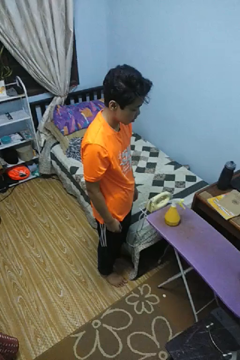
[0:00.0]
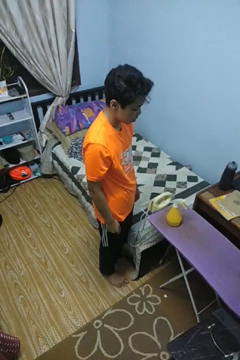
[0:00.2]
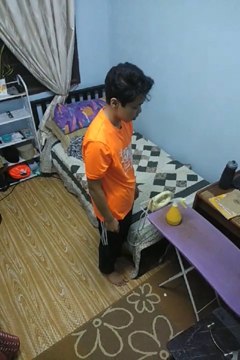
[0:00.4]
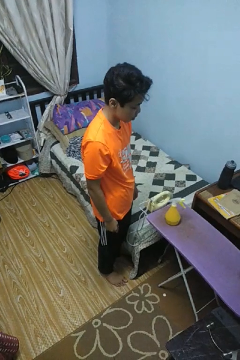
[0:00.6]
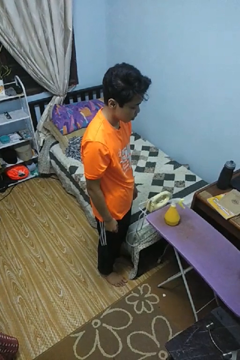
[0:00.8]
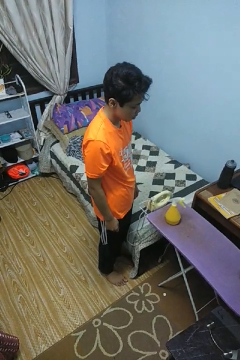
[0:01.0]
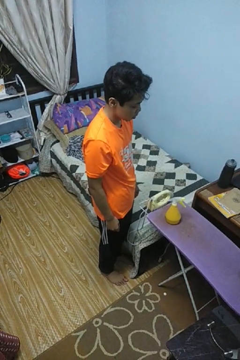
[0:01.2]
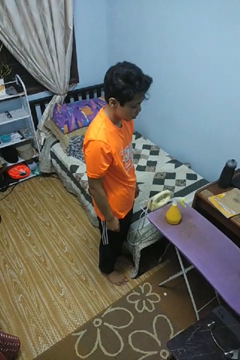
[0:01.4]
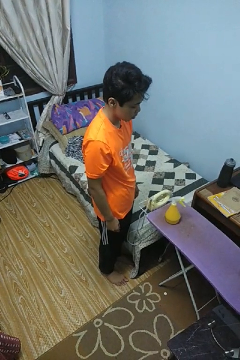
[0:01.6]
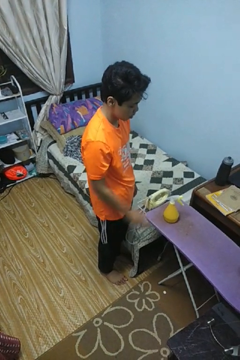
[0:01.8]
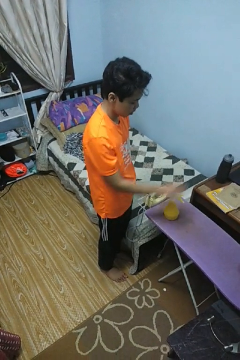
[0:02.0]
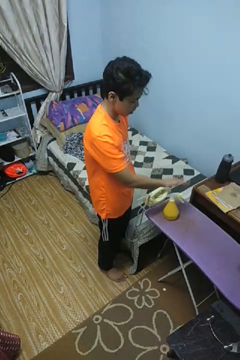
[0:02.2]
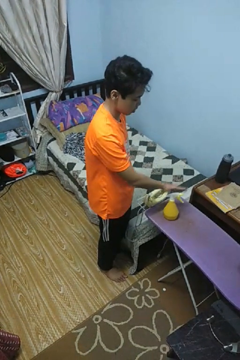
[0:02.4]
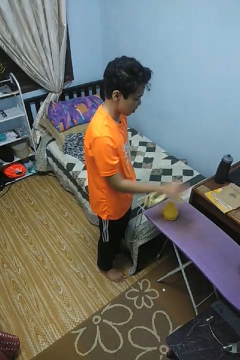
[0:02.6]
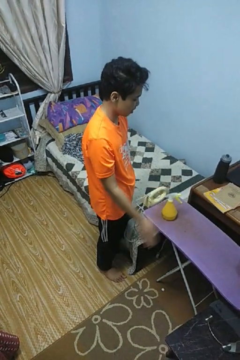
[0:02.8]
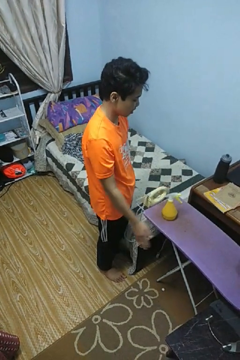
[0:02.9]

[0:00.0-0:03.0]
person waves hand over object

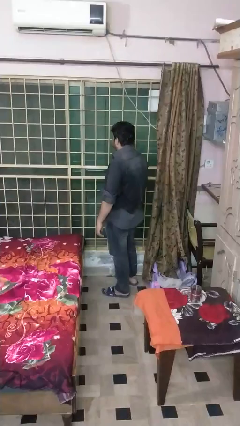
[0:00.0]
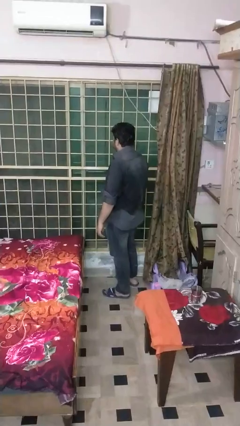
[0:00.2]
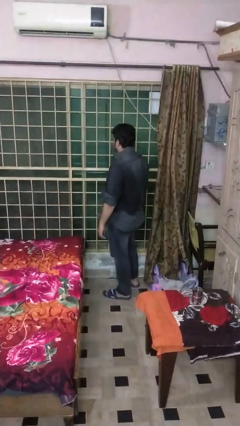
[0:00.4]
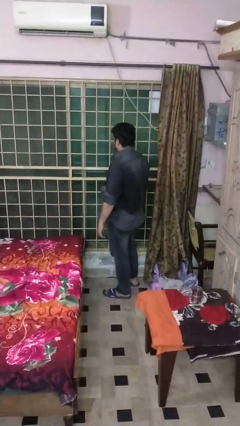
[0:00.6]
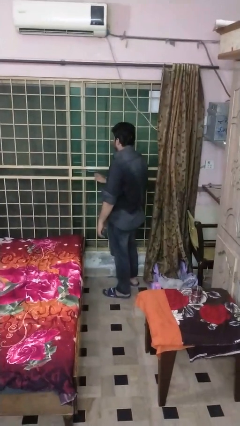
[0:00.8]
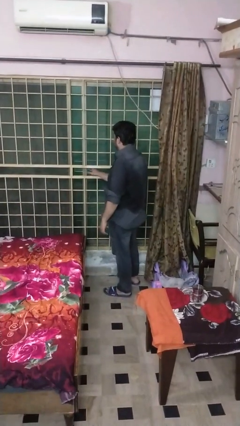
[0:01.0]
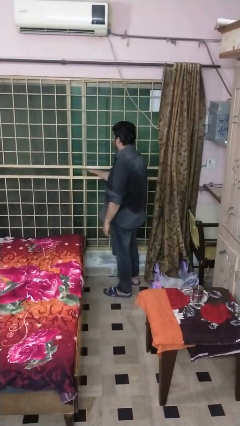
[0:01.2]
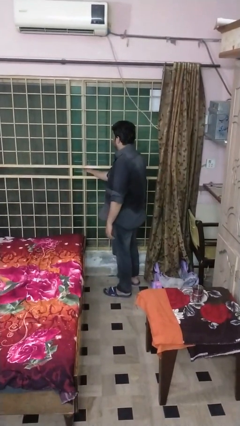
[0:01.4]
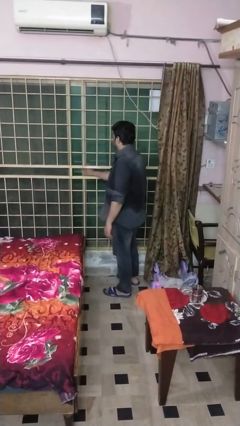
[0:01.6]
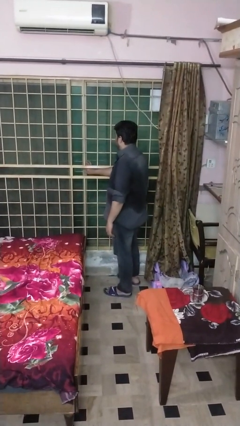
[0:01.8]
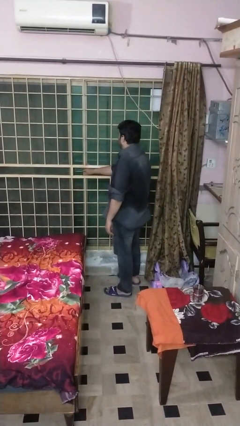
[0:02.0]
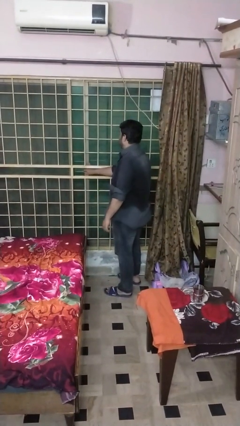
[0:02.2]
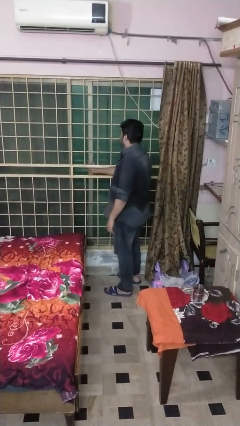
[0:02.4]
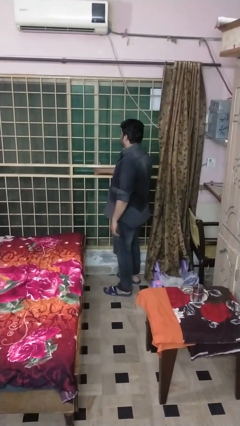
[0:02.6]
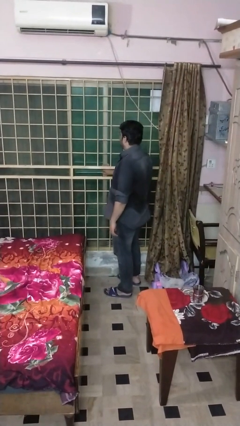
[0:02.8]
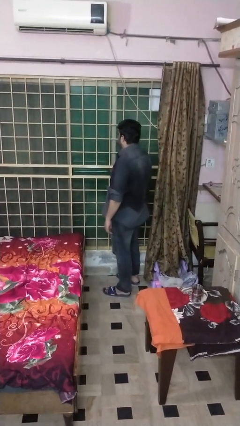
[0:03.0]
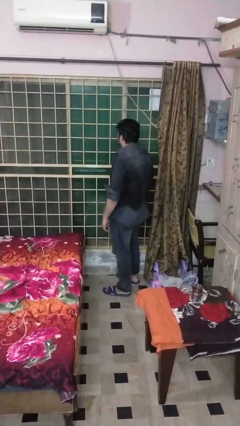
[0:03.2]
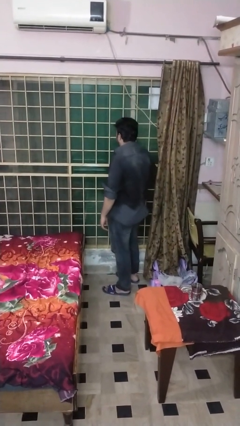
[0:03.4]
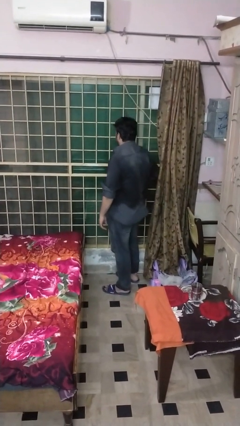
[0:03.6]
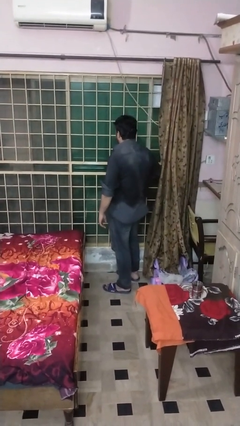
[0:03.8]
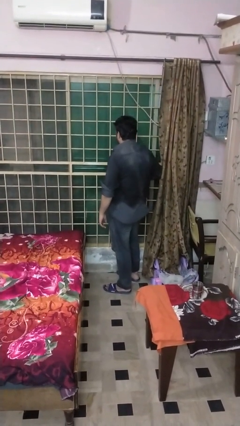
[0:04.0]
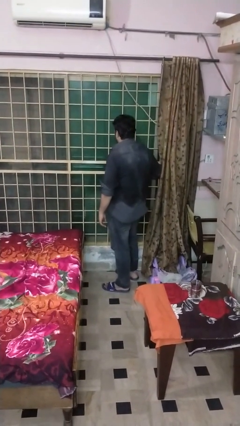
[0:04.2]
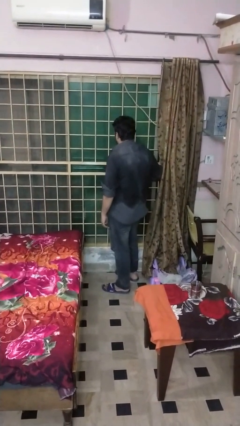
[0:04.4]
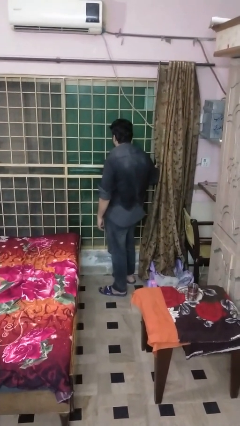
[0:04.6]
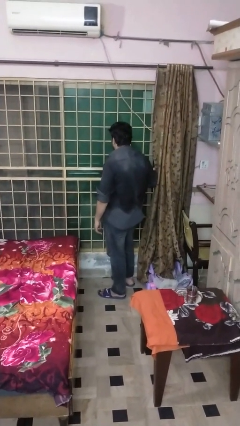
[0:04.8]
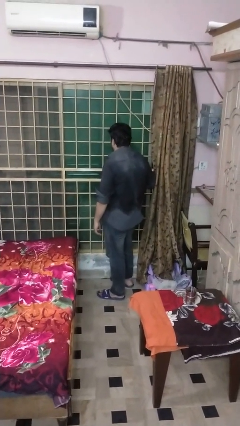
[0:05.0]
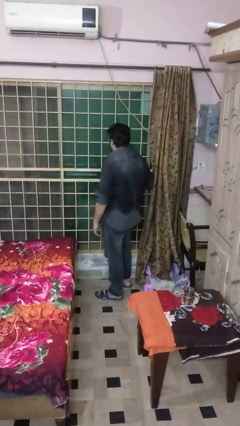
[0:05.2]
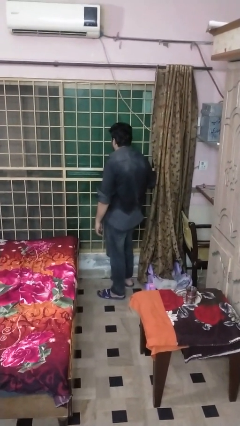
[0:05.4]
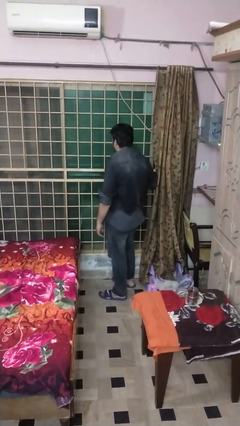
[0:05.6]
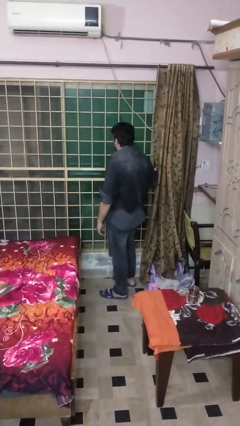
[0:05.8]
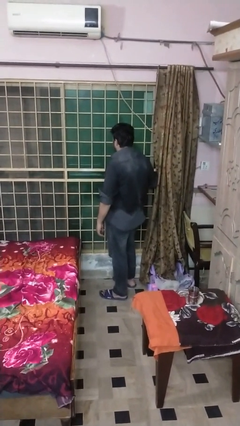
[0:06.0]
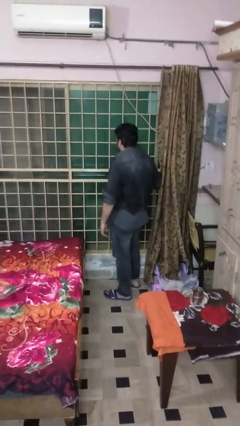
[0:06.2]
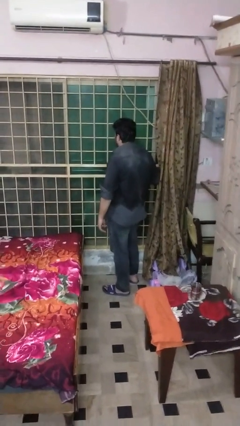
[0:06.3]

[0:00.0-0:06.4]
person opens sliding door

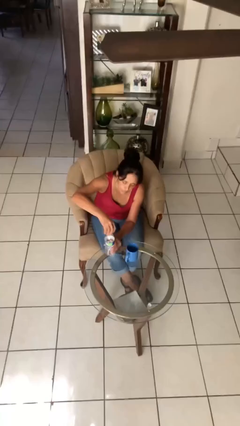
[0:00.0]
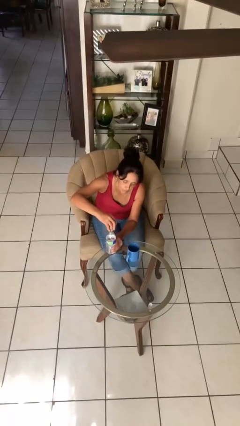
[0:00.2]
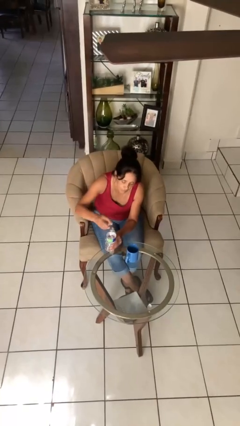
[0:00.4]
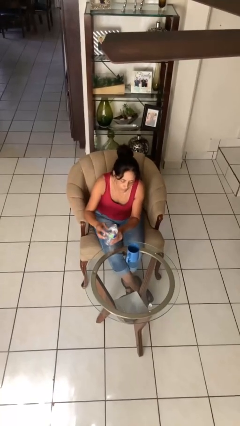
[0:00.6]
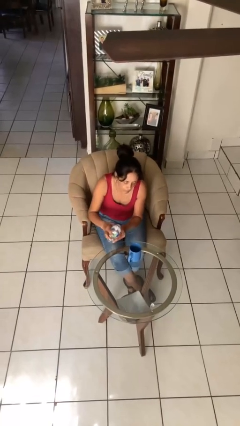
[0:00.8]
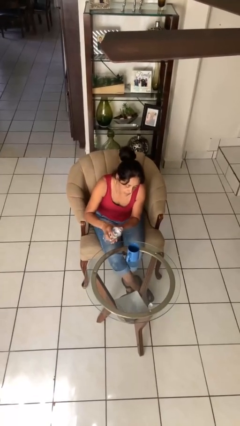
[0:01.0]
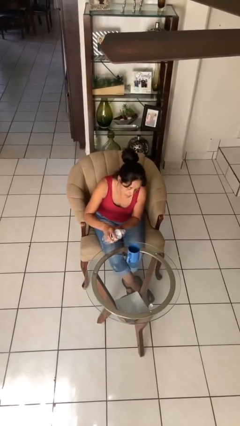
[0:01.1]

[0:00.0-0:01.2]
person unscrews lid from bottle

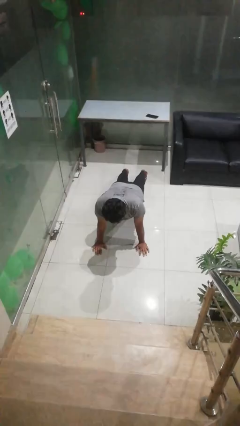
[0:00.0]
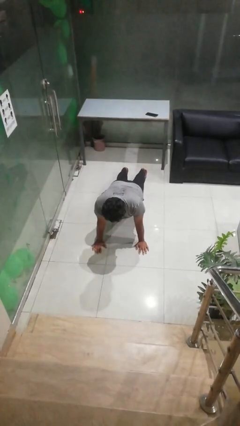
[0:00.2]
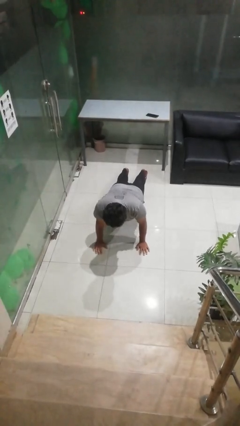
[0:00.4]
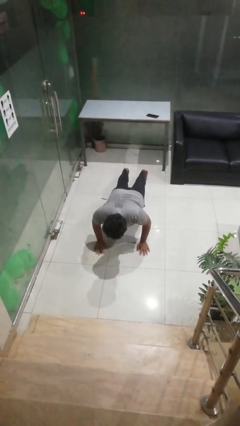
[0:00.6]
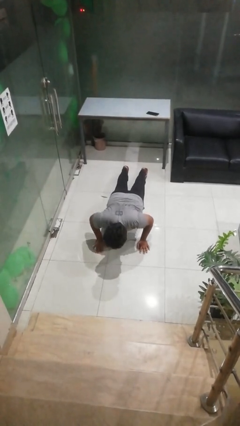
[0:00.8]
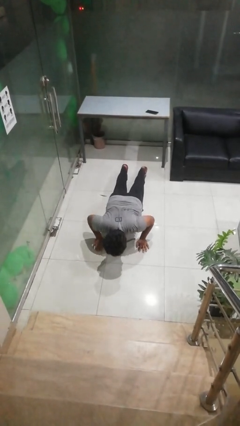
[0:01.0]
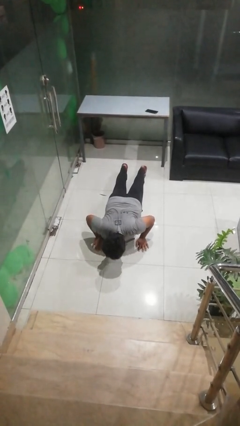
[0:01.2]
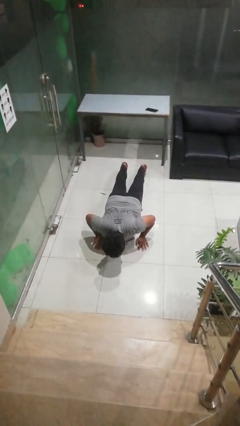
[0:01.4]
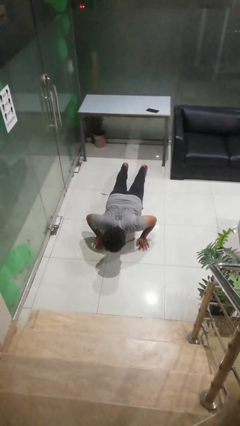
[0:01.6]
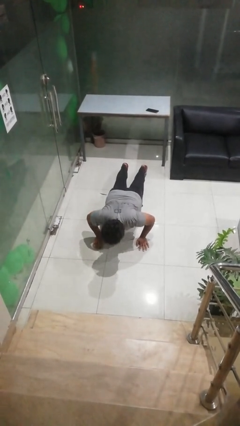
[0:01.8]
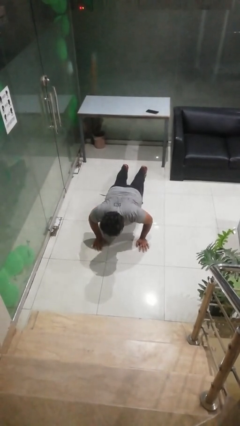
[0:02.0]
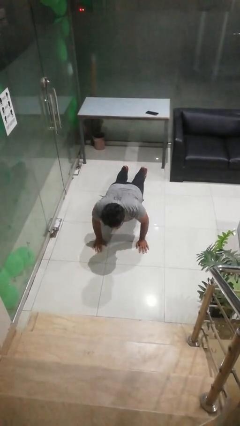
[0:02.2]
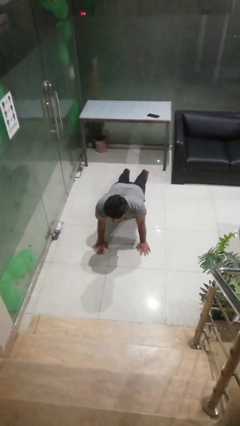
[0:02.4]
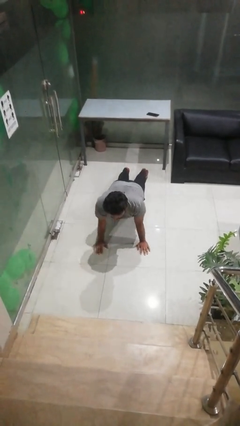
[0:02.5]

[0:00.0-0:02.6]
person exercises with pushup

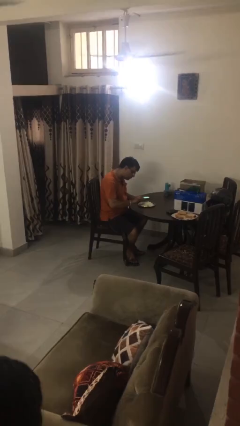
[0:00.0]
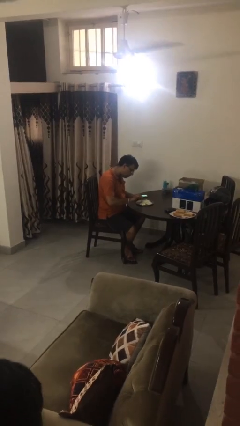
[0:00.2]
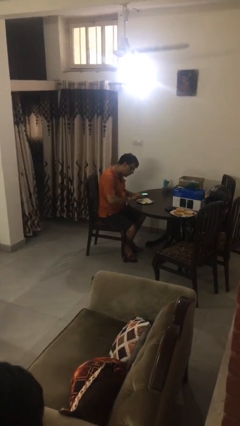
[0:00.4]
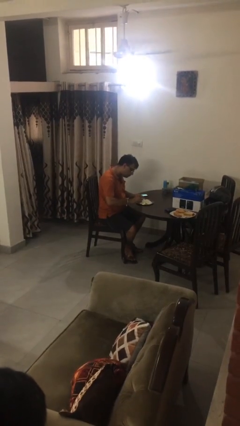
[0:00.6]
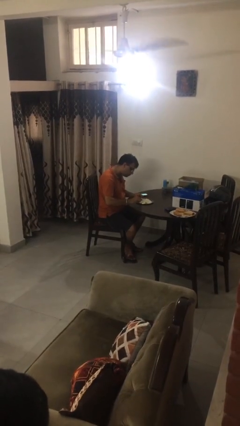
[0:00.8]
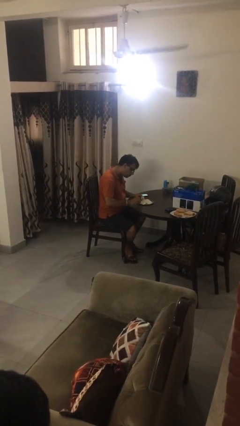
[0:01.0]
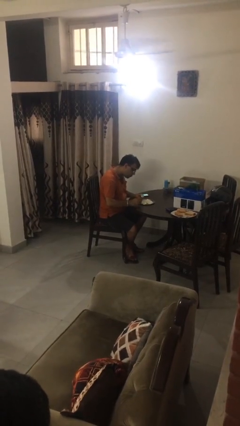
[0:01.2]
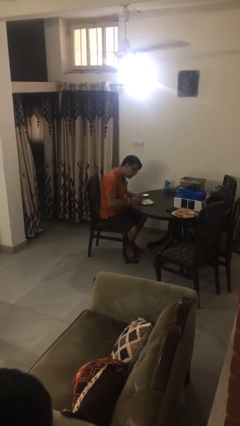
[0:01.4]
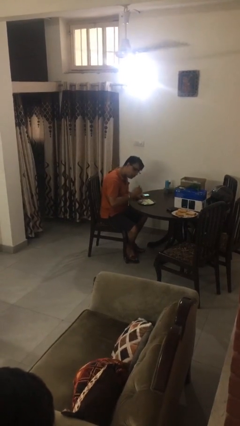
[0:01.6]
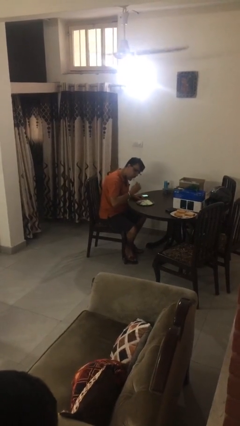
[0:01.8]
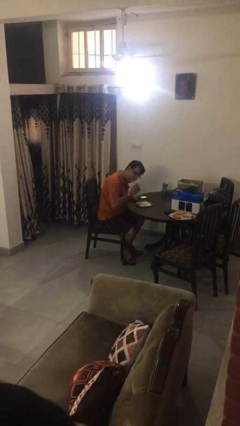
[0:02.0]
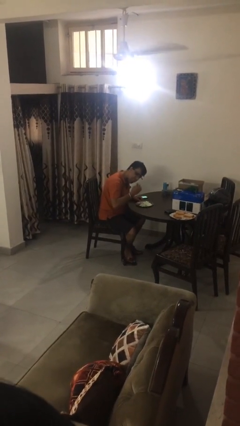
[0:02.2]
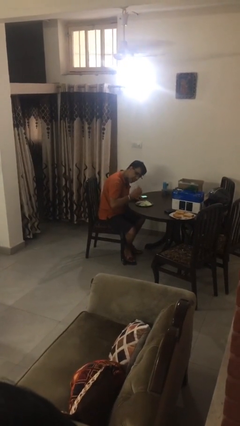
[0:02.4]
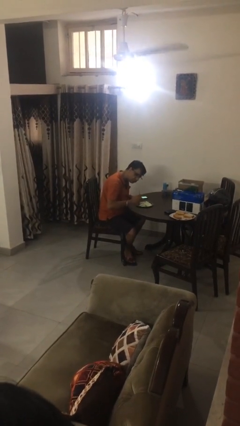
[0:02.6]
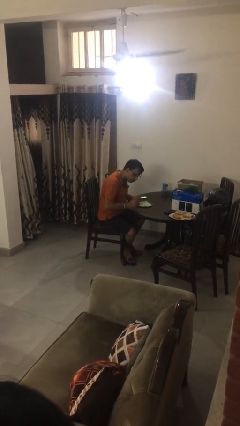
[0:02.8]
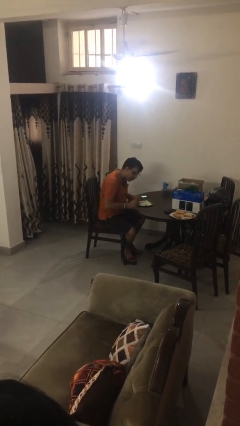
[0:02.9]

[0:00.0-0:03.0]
person eats with utensil

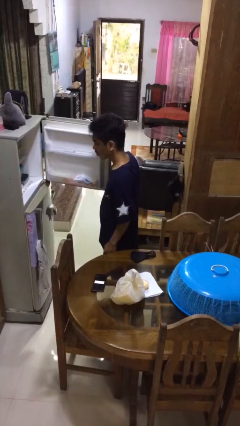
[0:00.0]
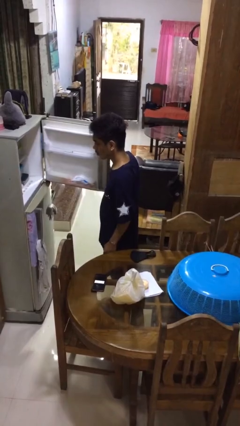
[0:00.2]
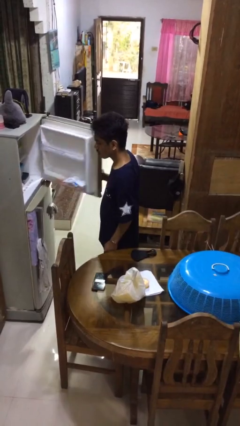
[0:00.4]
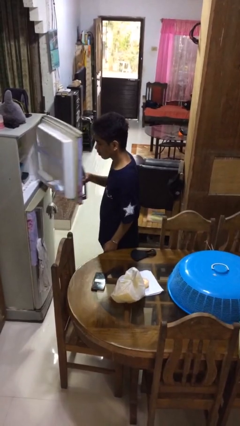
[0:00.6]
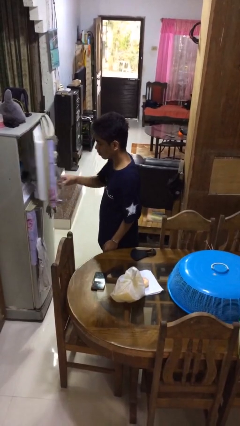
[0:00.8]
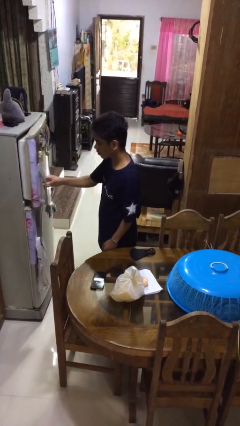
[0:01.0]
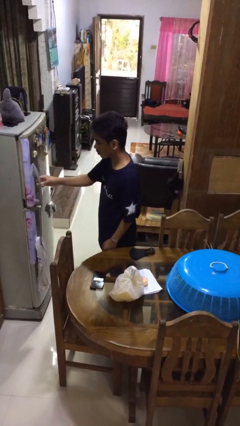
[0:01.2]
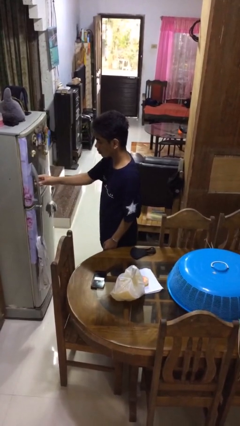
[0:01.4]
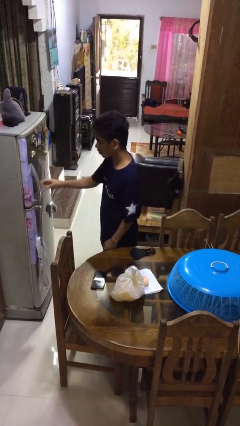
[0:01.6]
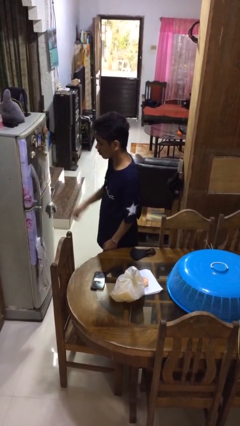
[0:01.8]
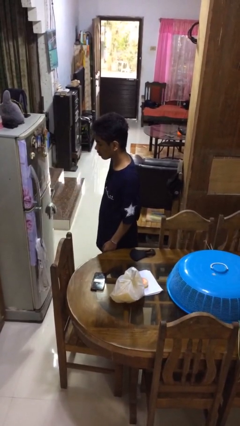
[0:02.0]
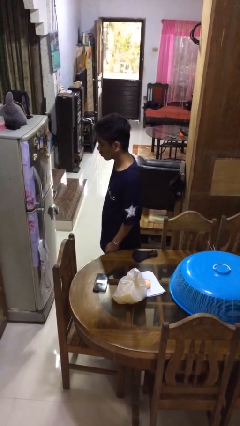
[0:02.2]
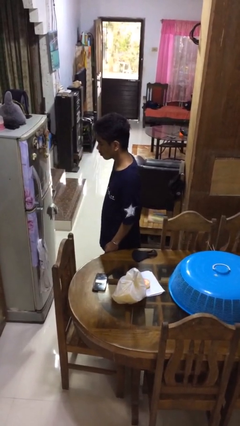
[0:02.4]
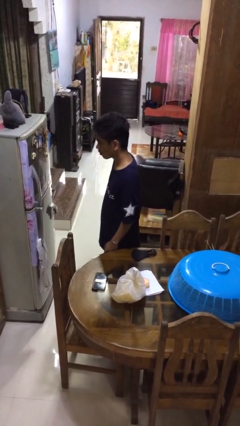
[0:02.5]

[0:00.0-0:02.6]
person closes refrigerator
